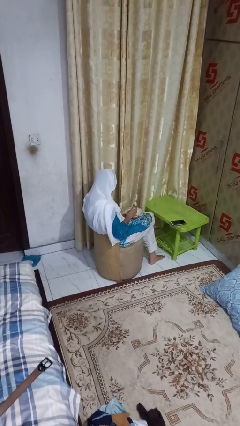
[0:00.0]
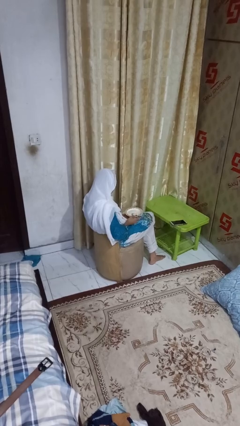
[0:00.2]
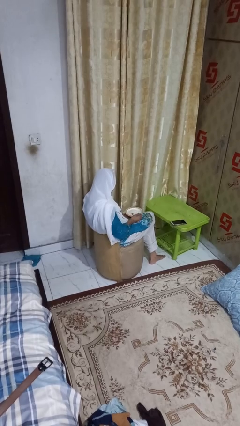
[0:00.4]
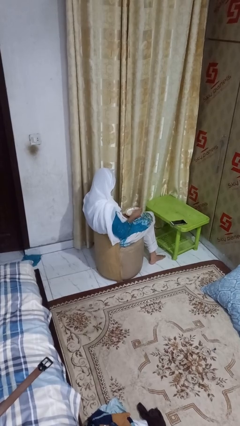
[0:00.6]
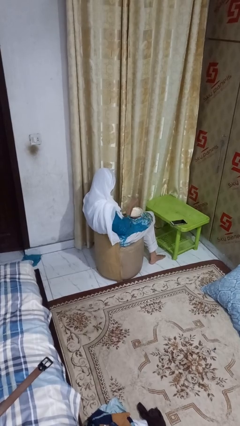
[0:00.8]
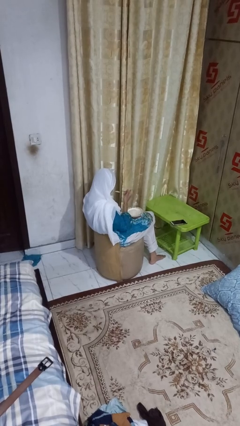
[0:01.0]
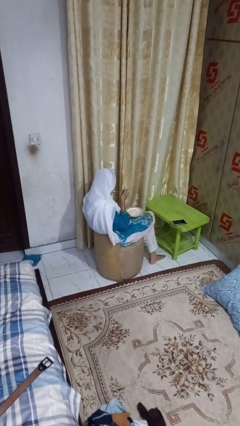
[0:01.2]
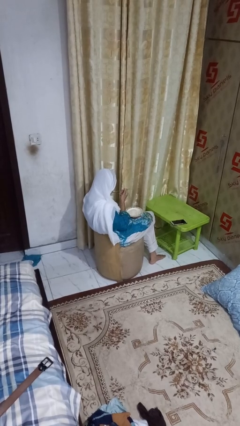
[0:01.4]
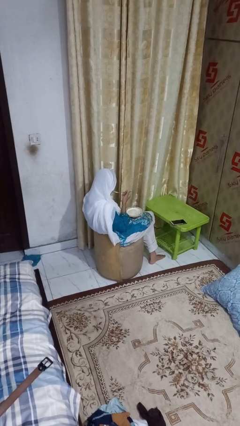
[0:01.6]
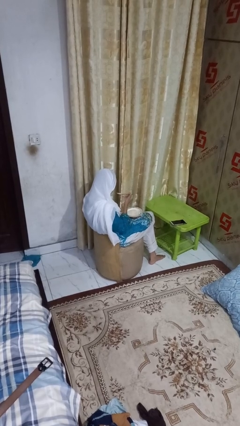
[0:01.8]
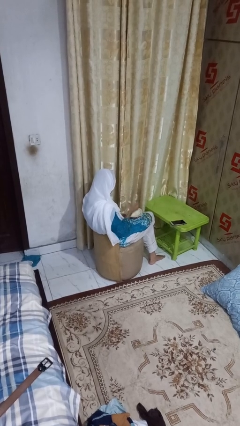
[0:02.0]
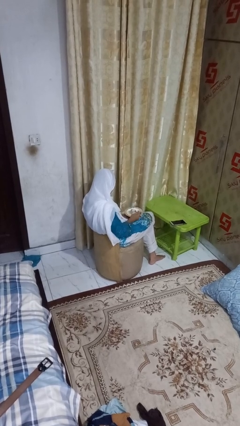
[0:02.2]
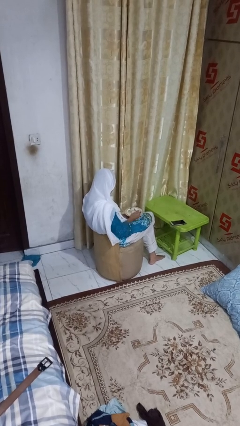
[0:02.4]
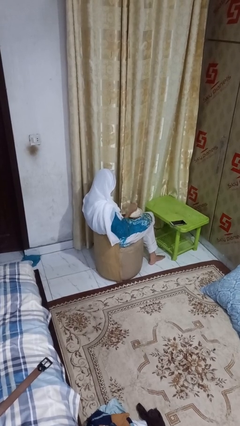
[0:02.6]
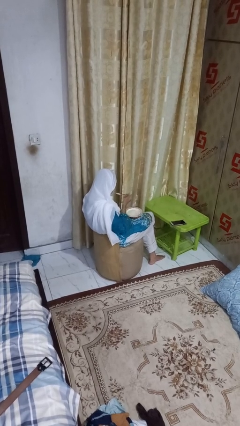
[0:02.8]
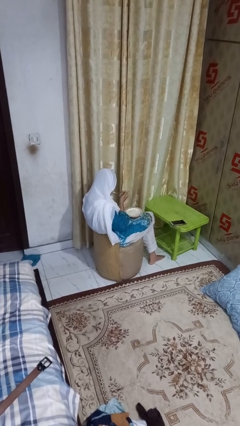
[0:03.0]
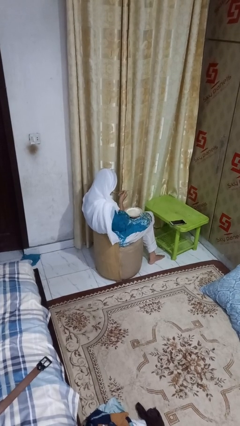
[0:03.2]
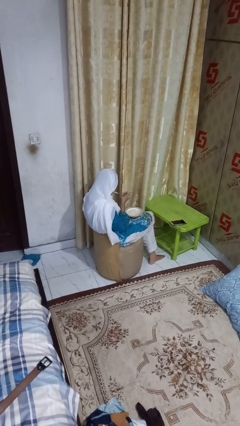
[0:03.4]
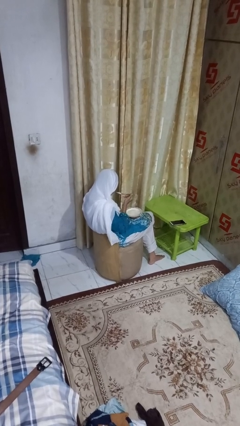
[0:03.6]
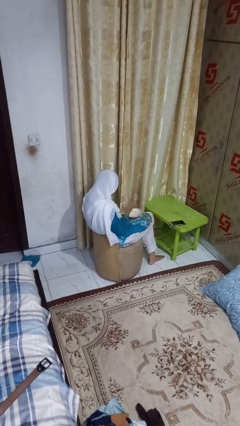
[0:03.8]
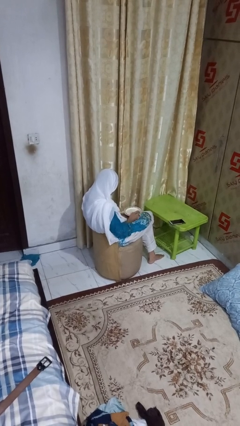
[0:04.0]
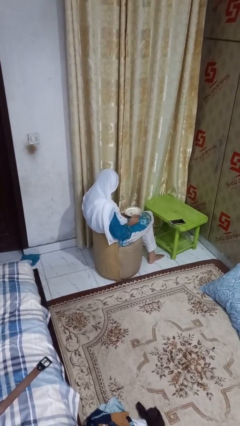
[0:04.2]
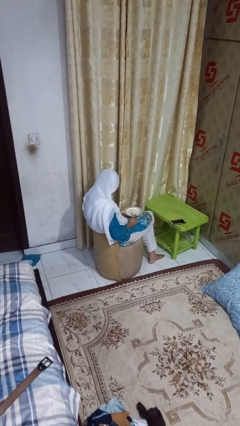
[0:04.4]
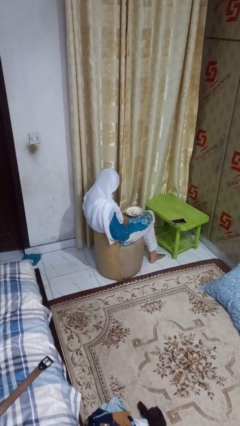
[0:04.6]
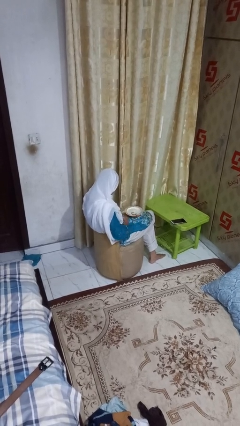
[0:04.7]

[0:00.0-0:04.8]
person eats with utensil

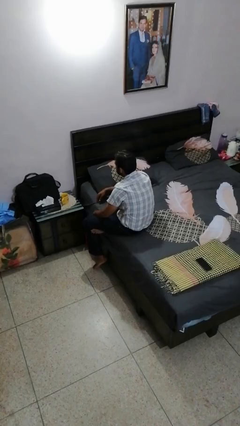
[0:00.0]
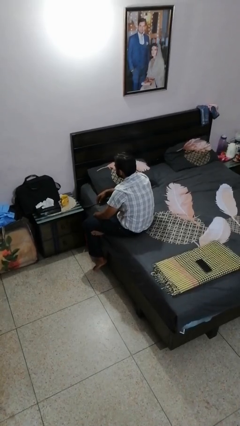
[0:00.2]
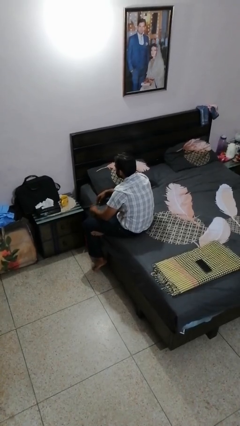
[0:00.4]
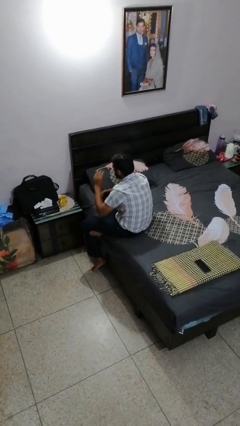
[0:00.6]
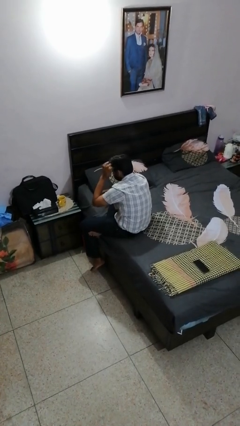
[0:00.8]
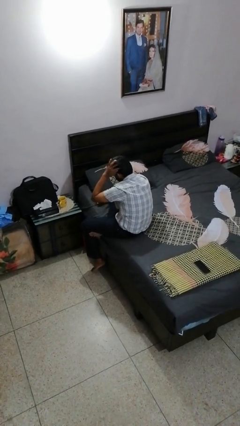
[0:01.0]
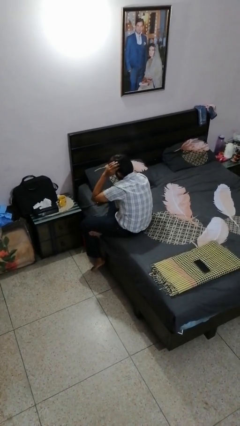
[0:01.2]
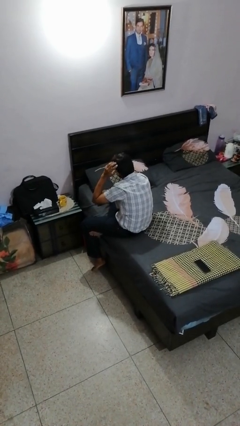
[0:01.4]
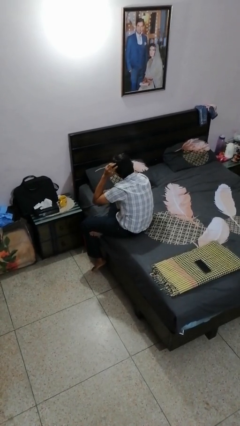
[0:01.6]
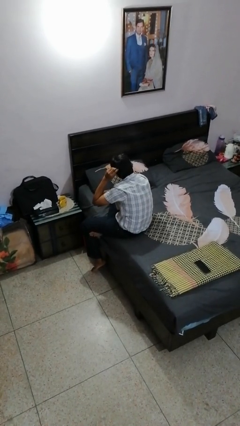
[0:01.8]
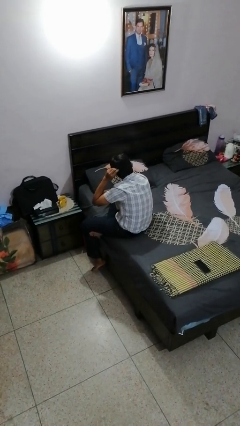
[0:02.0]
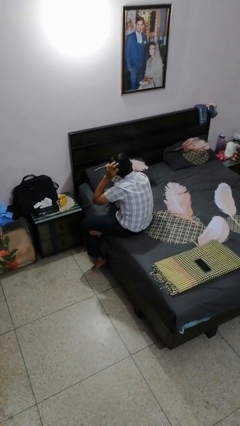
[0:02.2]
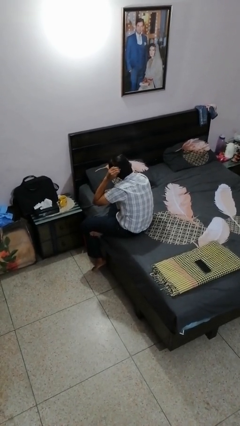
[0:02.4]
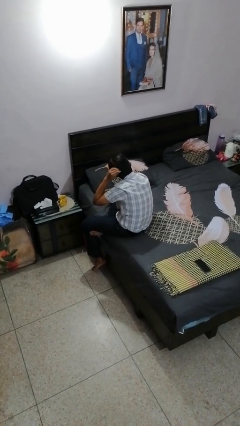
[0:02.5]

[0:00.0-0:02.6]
person strokes hair

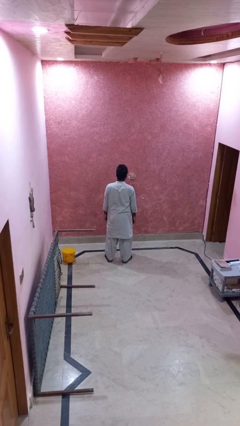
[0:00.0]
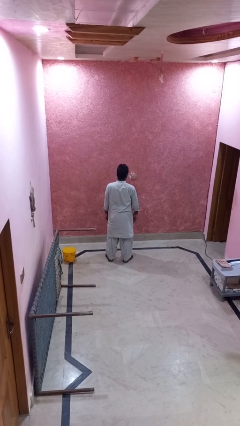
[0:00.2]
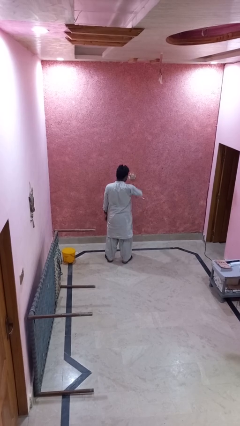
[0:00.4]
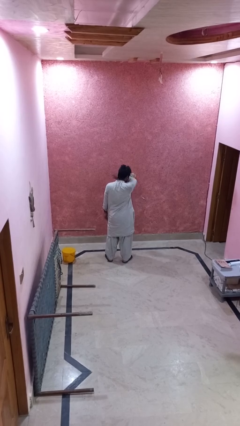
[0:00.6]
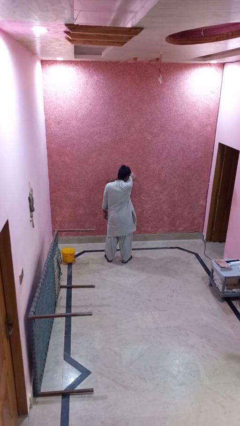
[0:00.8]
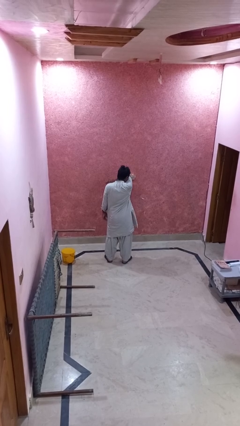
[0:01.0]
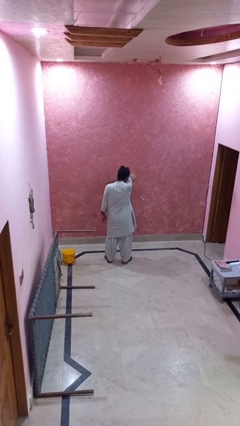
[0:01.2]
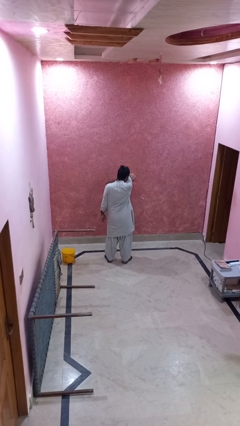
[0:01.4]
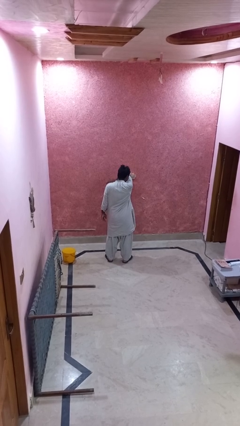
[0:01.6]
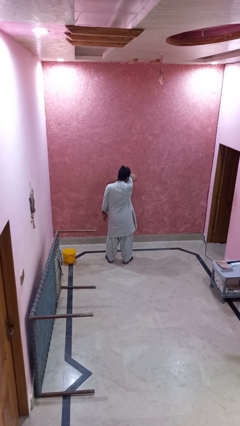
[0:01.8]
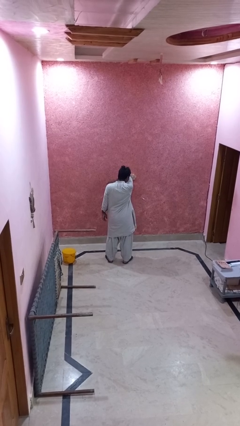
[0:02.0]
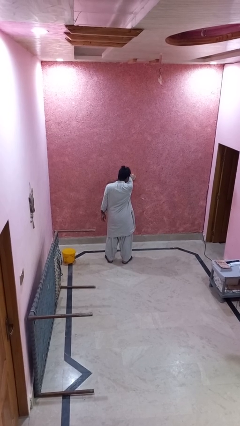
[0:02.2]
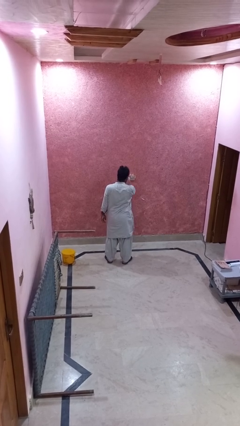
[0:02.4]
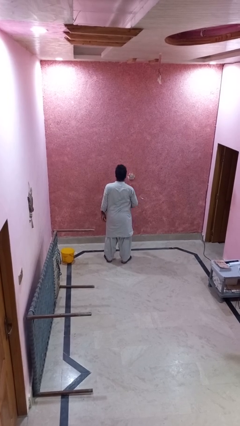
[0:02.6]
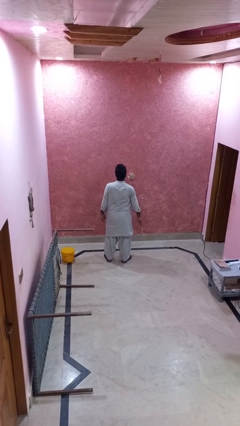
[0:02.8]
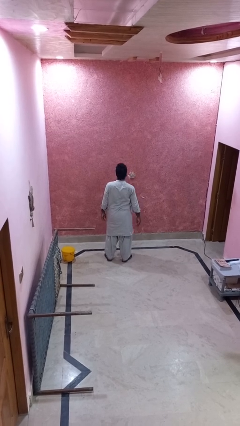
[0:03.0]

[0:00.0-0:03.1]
person sneezes into arm

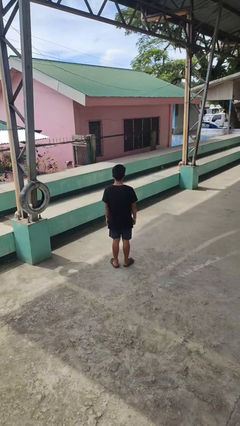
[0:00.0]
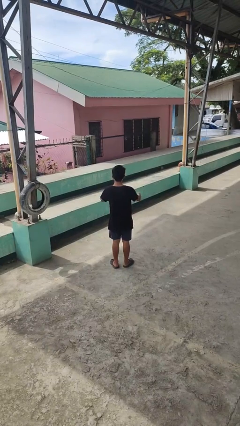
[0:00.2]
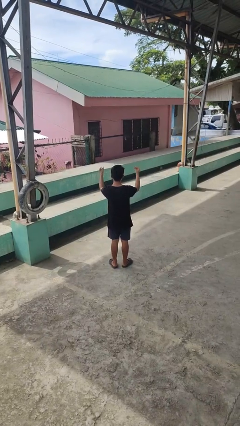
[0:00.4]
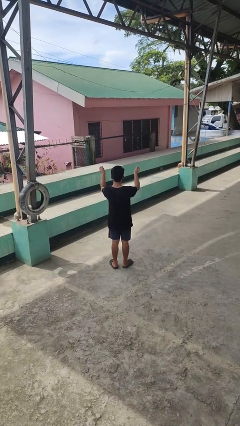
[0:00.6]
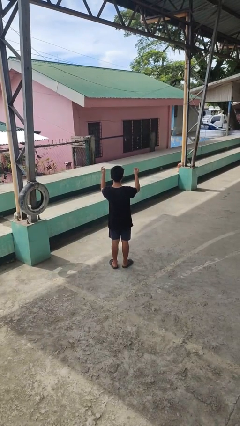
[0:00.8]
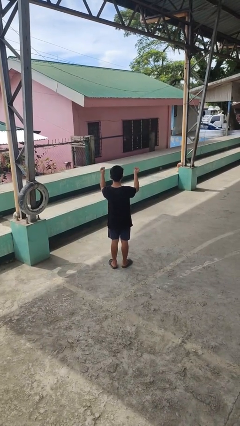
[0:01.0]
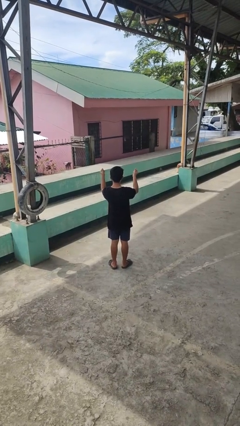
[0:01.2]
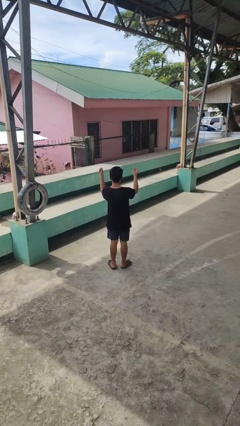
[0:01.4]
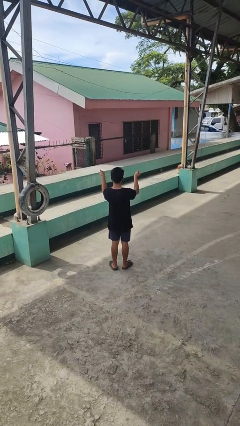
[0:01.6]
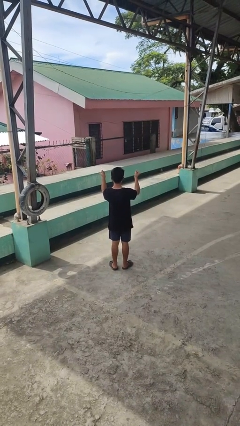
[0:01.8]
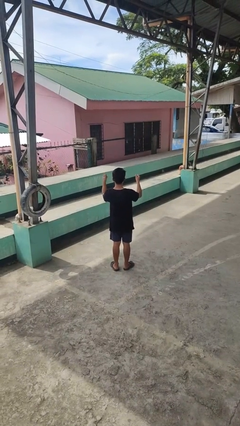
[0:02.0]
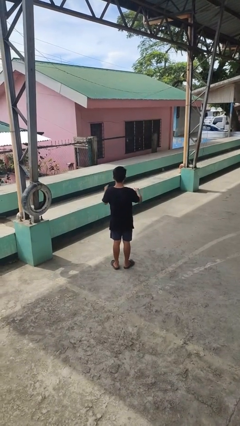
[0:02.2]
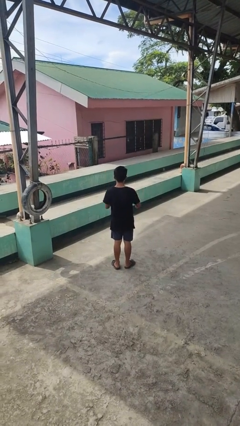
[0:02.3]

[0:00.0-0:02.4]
person snaps fingers

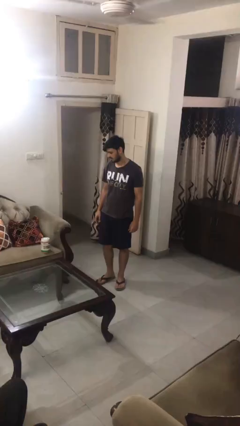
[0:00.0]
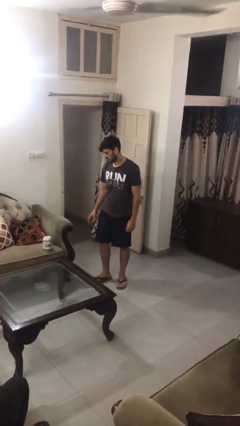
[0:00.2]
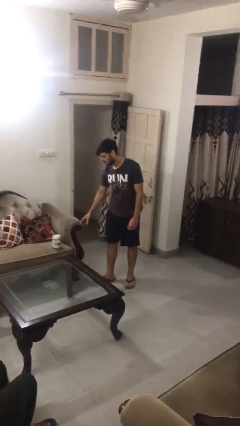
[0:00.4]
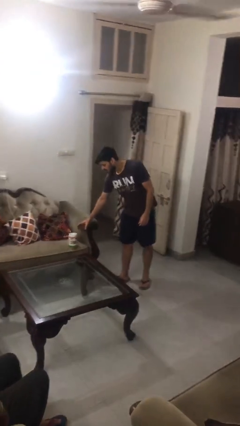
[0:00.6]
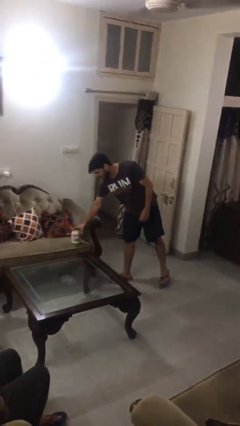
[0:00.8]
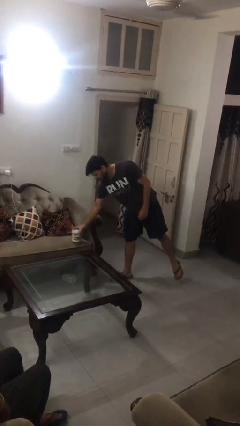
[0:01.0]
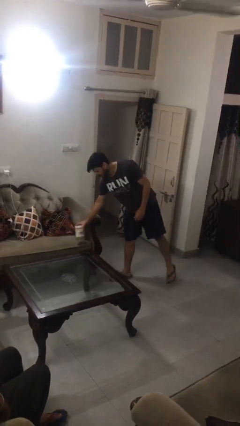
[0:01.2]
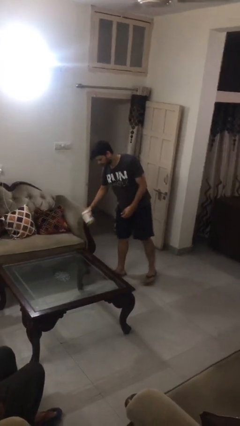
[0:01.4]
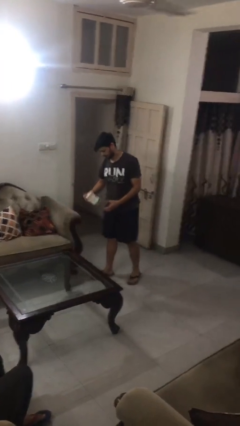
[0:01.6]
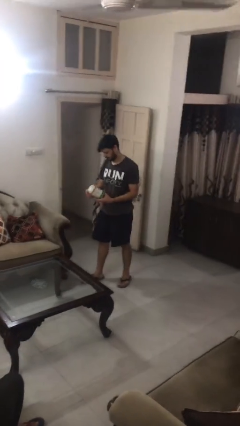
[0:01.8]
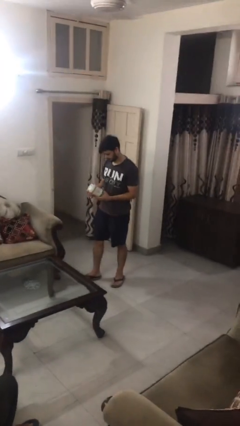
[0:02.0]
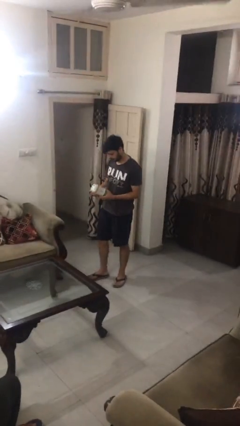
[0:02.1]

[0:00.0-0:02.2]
person picks up object from couch

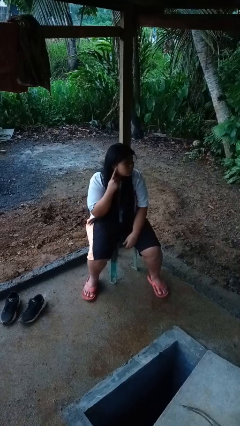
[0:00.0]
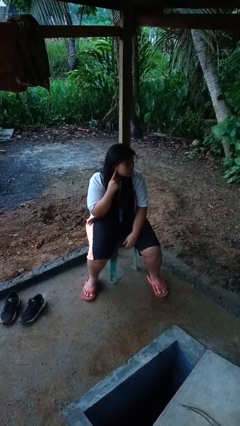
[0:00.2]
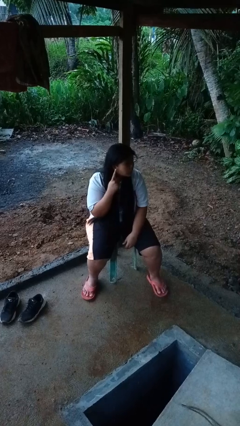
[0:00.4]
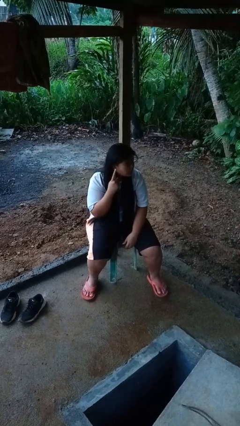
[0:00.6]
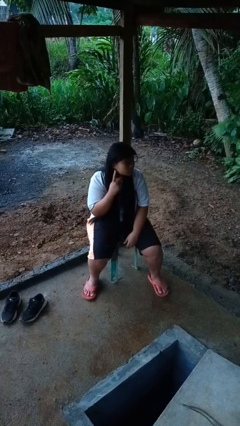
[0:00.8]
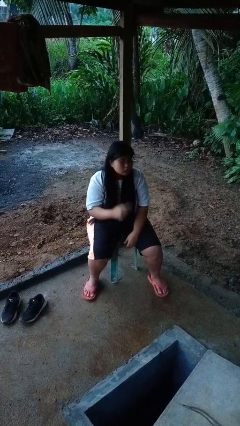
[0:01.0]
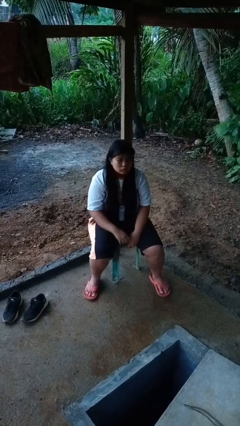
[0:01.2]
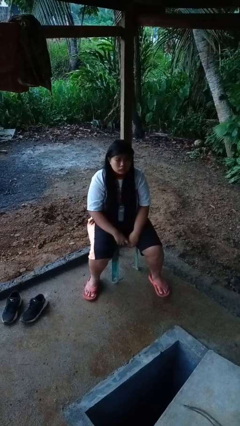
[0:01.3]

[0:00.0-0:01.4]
person gestures listen closely

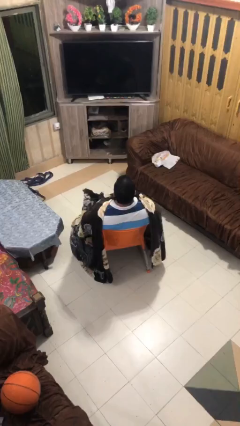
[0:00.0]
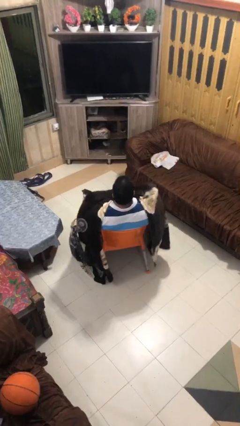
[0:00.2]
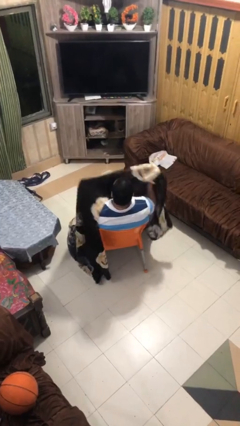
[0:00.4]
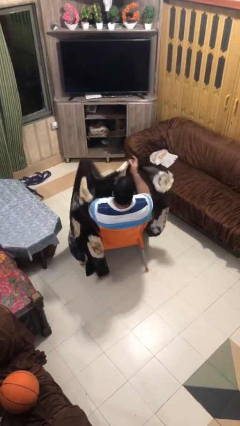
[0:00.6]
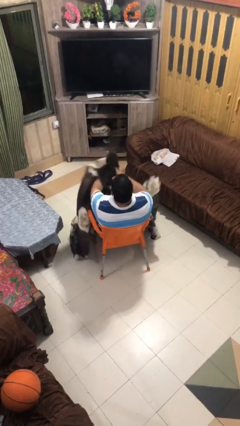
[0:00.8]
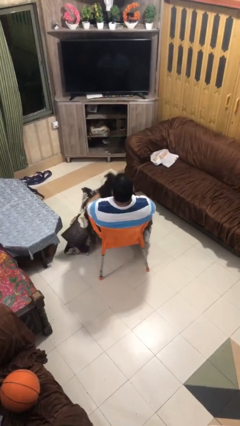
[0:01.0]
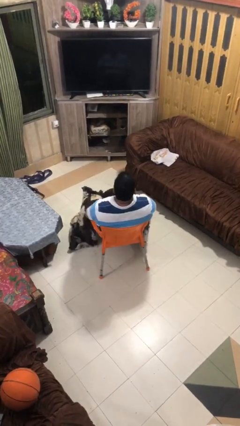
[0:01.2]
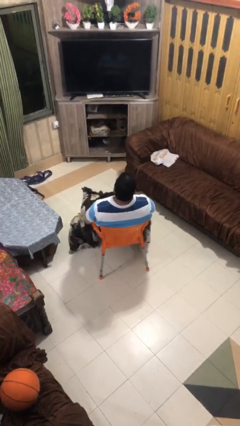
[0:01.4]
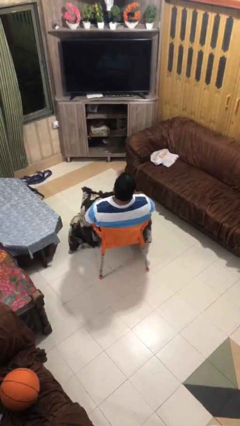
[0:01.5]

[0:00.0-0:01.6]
person uncovers with blanket
